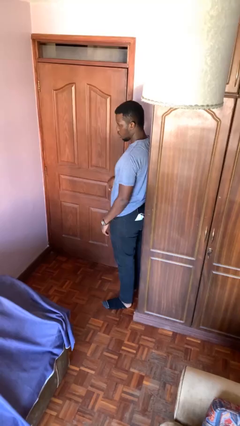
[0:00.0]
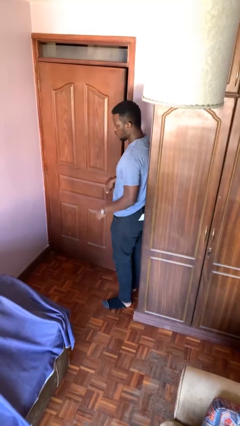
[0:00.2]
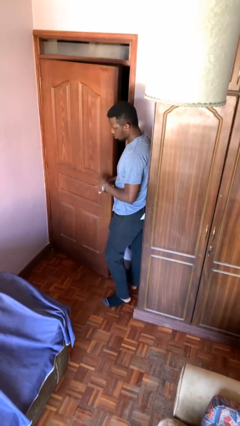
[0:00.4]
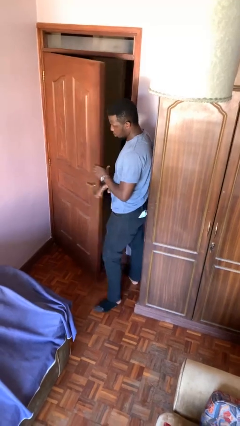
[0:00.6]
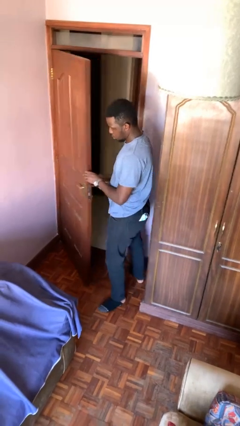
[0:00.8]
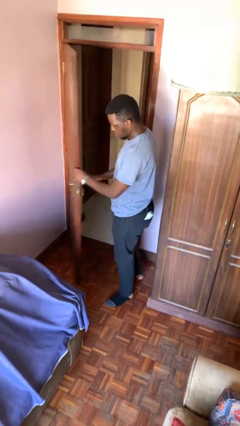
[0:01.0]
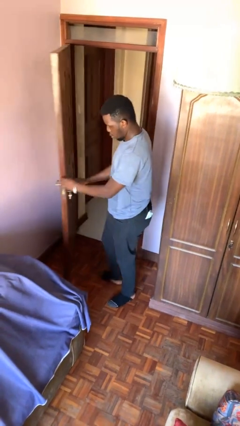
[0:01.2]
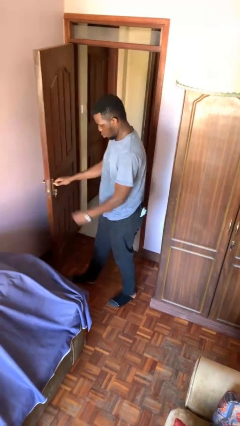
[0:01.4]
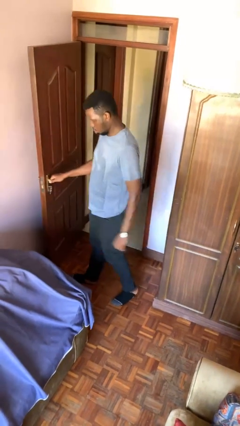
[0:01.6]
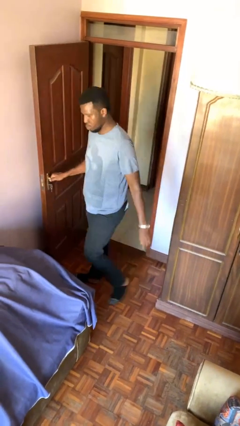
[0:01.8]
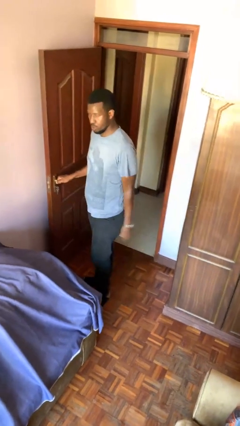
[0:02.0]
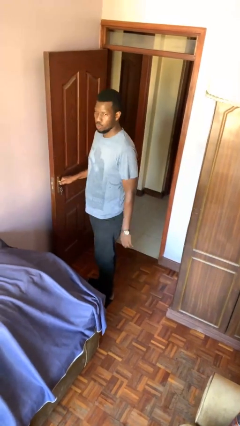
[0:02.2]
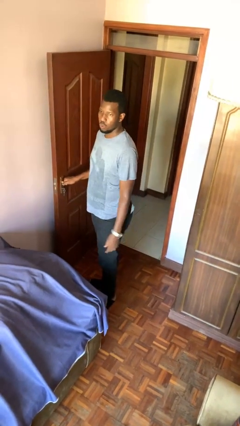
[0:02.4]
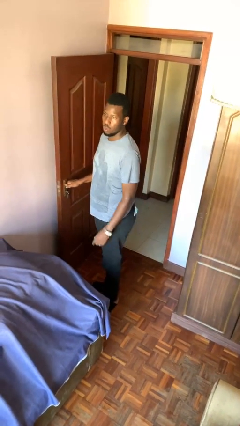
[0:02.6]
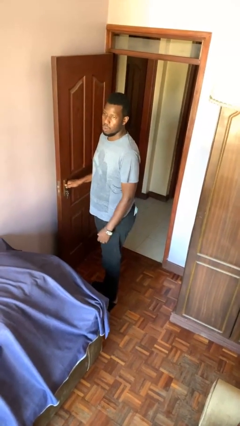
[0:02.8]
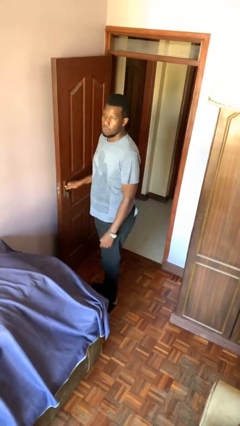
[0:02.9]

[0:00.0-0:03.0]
person opens facility door

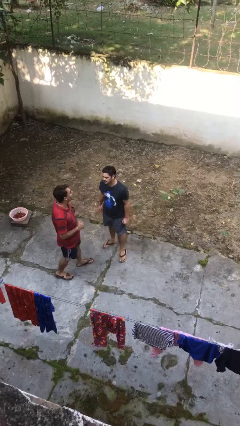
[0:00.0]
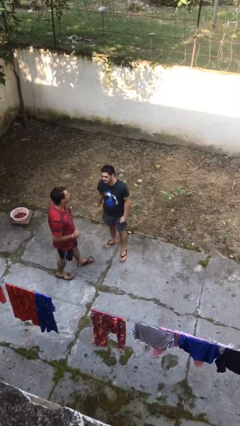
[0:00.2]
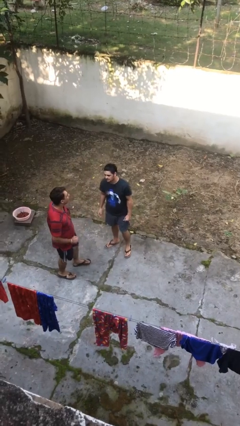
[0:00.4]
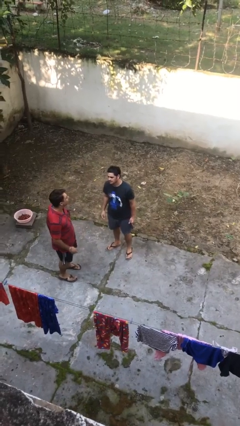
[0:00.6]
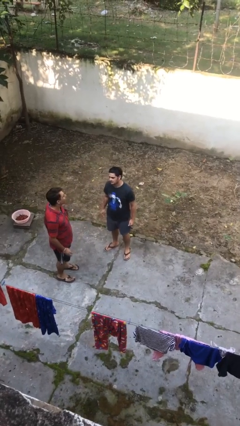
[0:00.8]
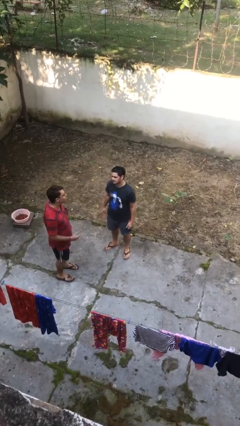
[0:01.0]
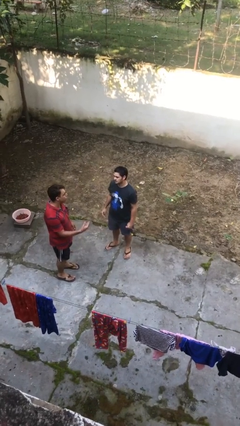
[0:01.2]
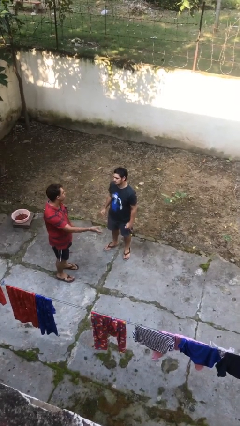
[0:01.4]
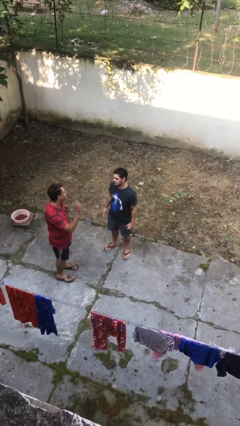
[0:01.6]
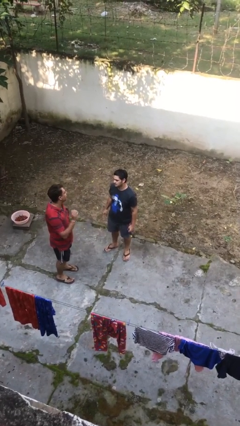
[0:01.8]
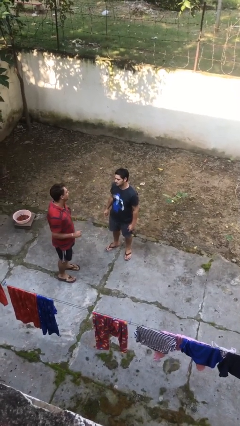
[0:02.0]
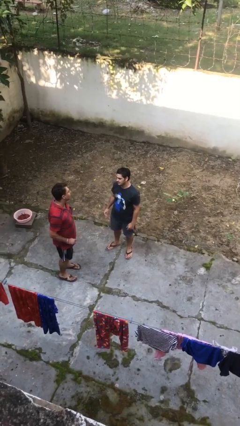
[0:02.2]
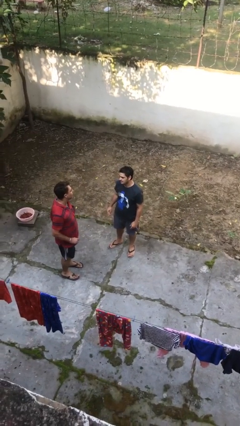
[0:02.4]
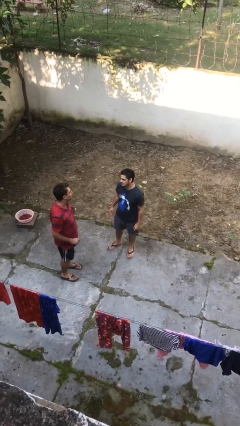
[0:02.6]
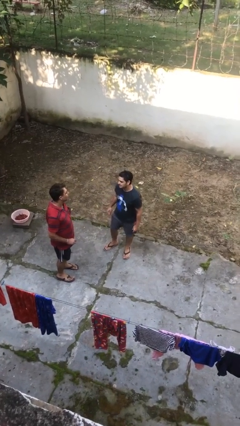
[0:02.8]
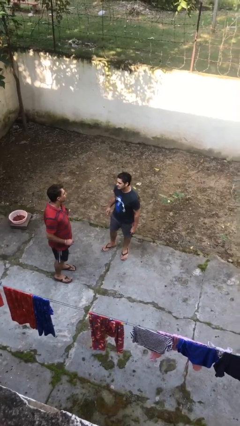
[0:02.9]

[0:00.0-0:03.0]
person talks to person

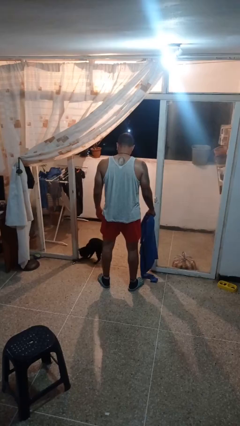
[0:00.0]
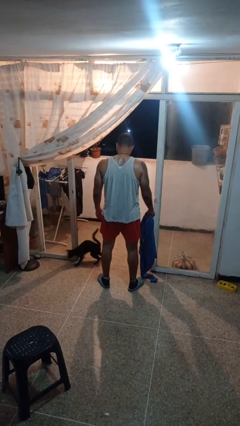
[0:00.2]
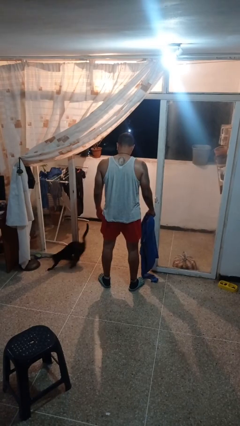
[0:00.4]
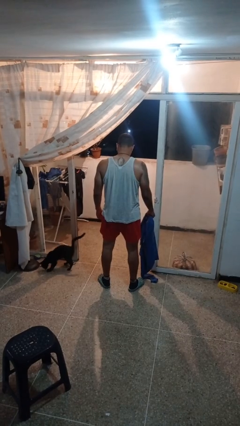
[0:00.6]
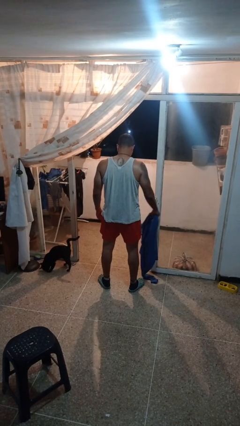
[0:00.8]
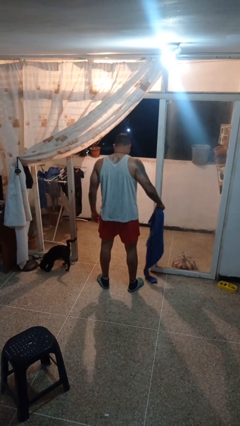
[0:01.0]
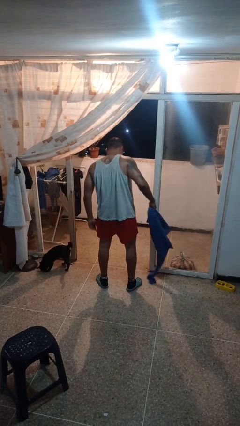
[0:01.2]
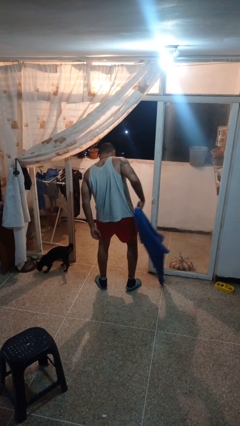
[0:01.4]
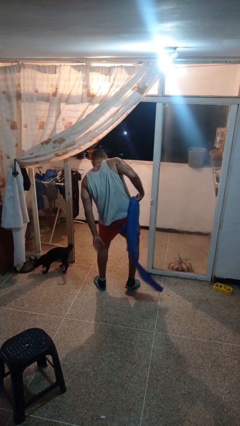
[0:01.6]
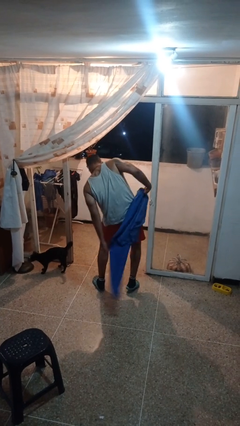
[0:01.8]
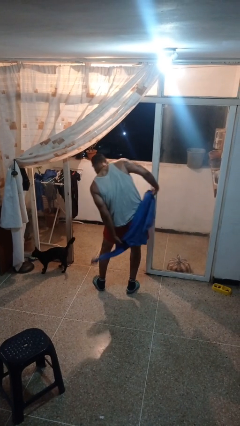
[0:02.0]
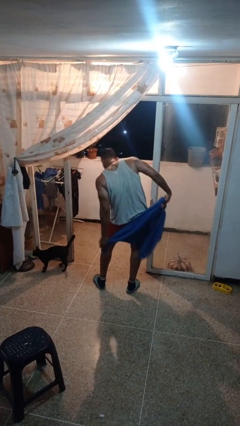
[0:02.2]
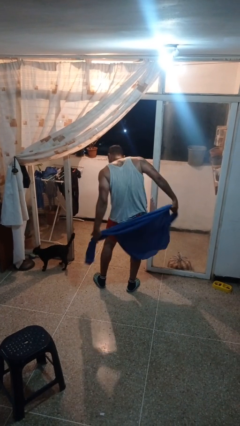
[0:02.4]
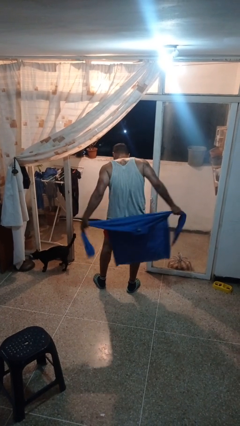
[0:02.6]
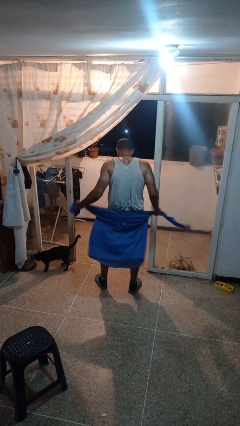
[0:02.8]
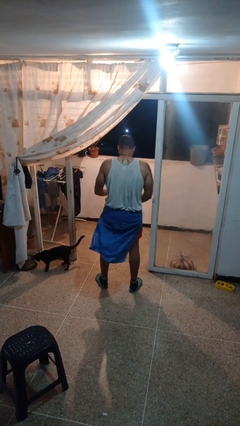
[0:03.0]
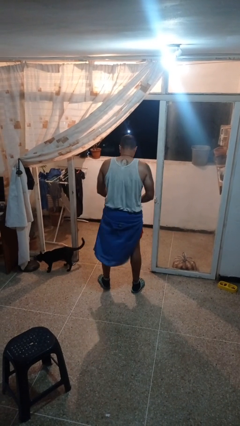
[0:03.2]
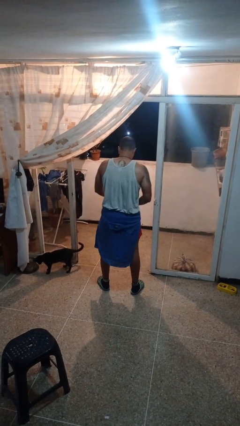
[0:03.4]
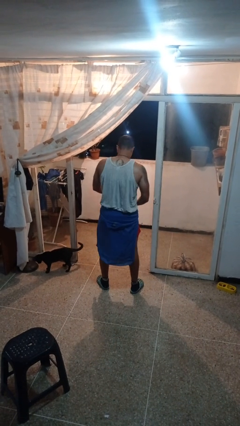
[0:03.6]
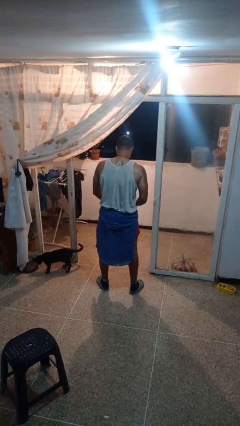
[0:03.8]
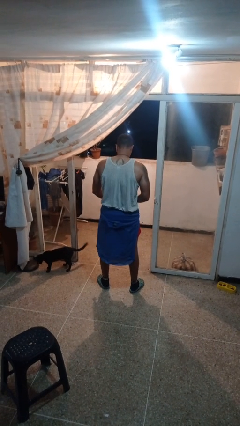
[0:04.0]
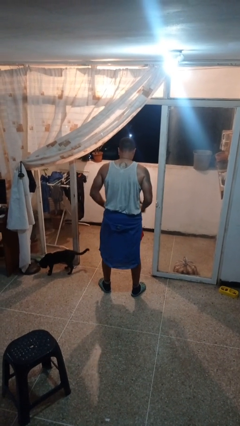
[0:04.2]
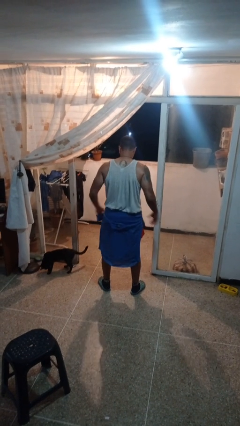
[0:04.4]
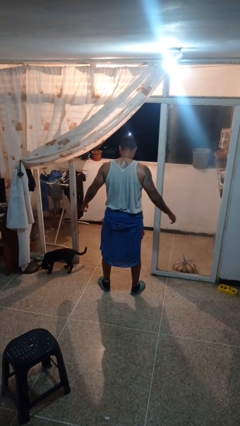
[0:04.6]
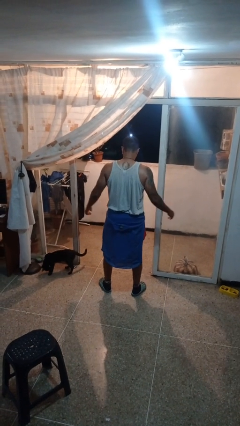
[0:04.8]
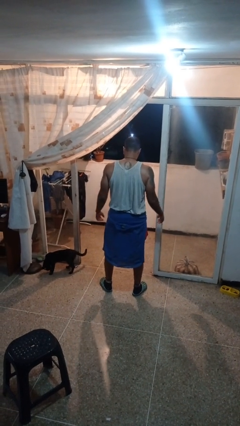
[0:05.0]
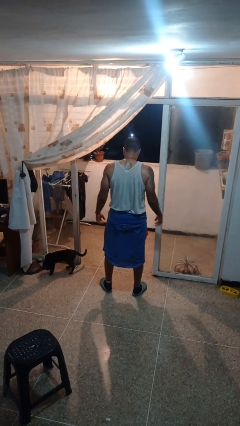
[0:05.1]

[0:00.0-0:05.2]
person ties jacket around waist

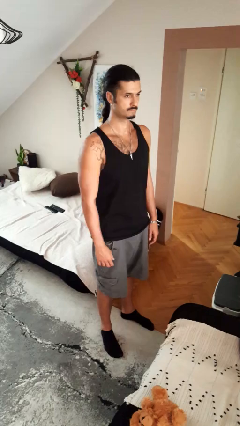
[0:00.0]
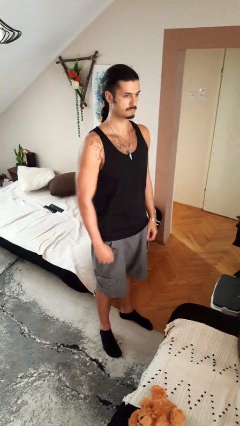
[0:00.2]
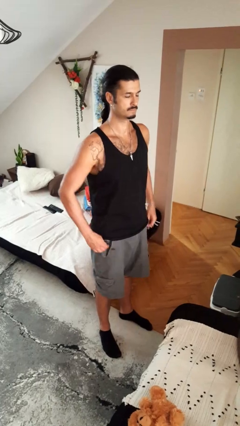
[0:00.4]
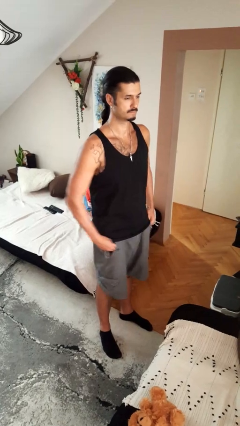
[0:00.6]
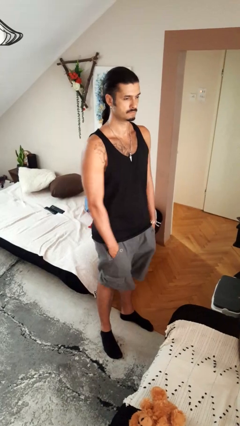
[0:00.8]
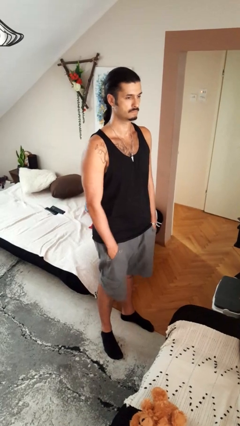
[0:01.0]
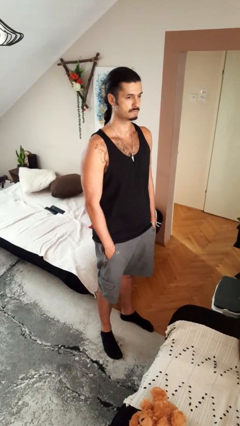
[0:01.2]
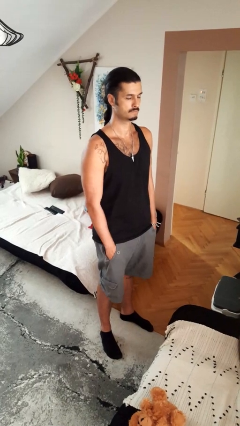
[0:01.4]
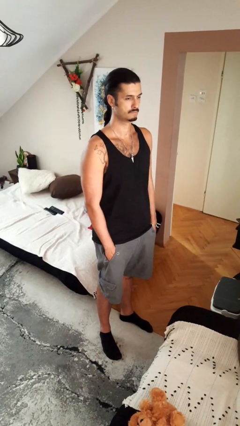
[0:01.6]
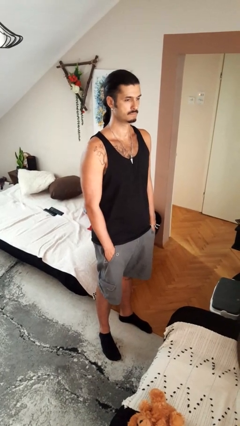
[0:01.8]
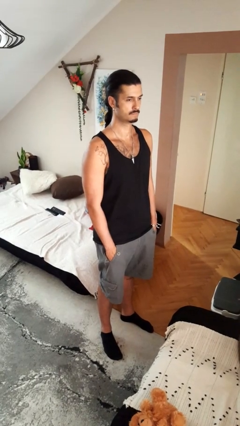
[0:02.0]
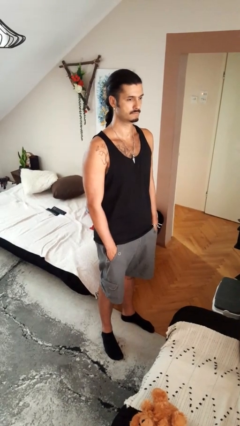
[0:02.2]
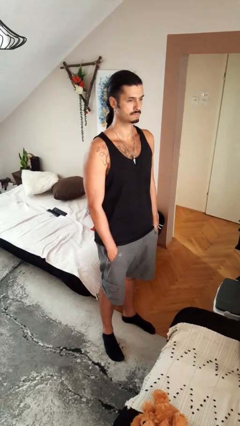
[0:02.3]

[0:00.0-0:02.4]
person puts hands in back pockets

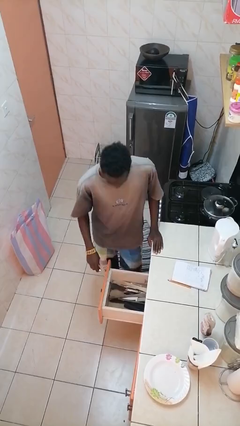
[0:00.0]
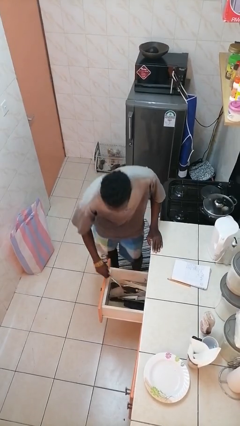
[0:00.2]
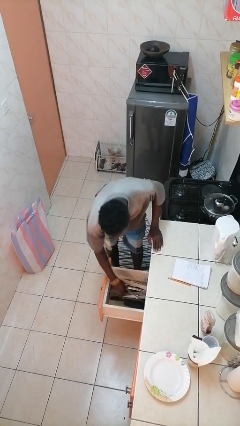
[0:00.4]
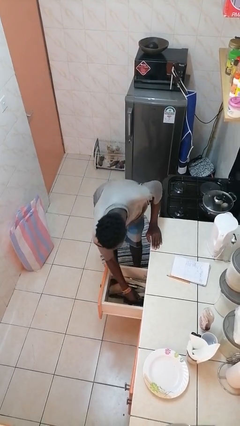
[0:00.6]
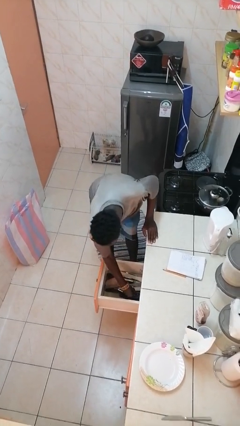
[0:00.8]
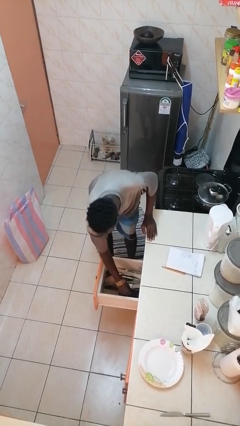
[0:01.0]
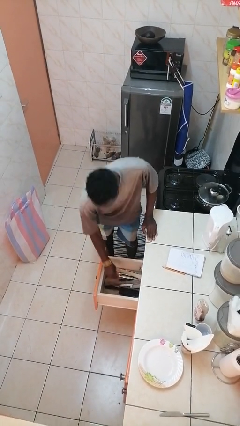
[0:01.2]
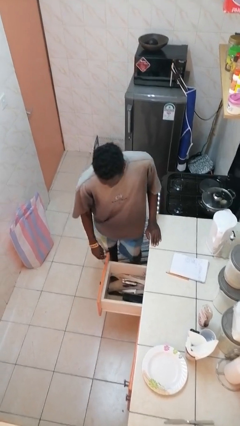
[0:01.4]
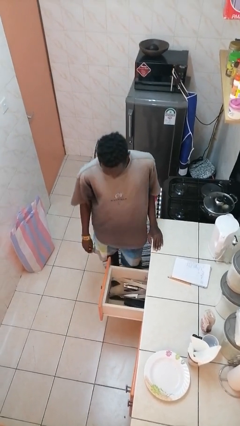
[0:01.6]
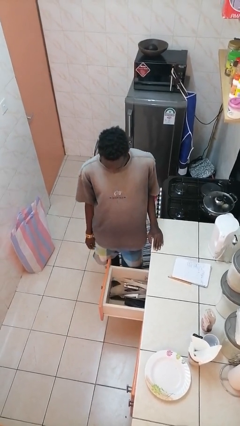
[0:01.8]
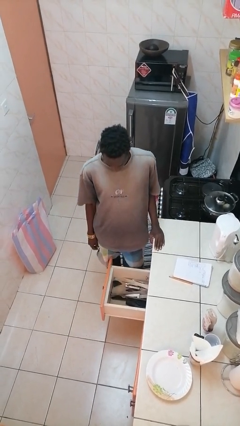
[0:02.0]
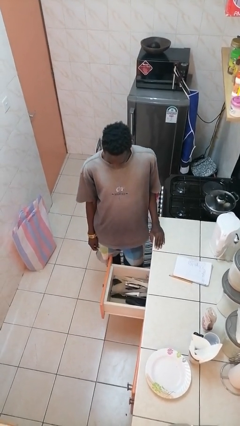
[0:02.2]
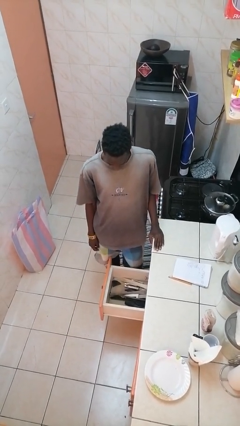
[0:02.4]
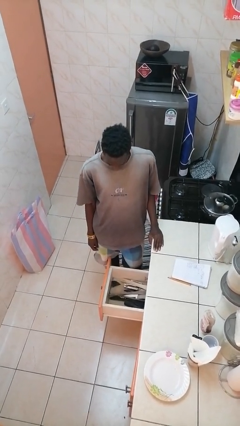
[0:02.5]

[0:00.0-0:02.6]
person puts object into kitchen drawer

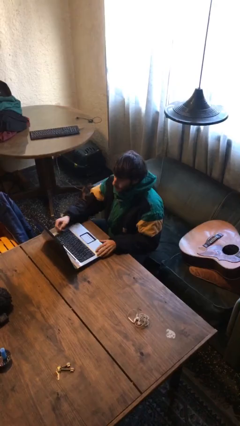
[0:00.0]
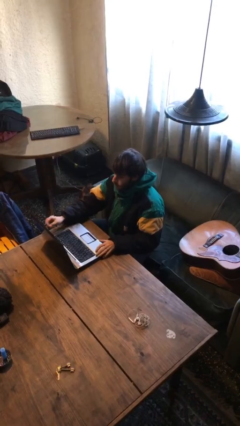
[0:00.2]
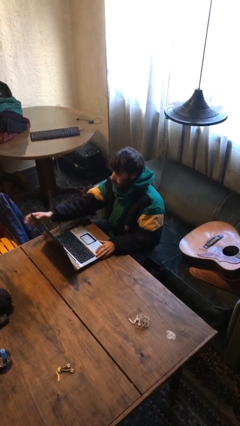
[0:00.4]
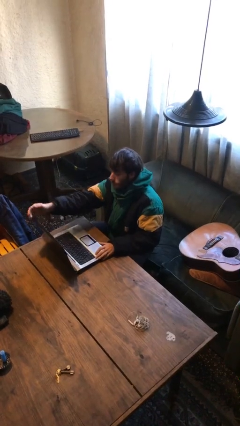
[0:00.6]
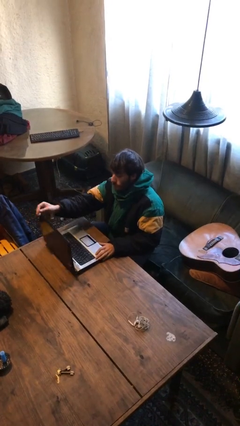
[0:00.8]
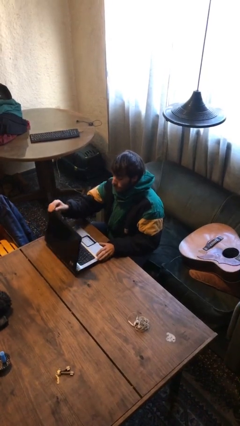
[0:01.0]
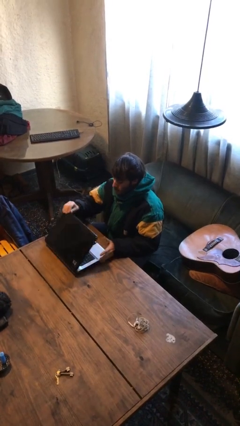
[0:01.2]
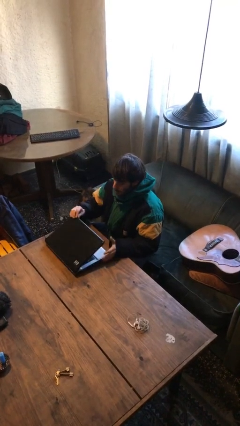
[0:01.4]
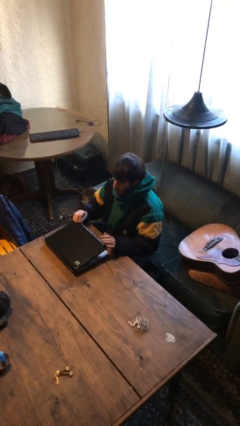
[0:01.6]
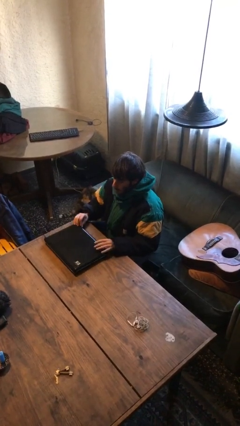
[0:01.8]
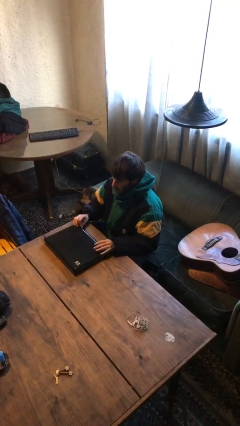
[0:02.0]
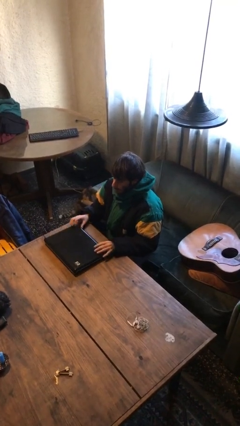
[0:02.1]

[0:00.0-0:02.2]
person closes laptop
